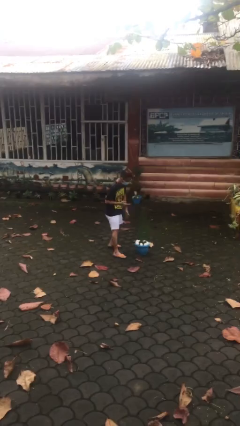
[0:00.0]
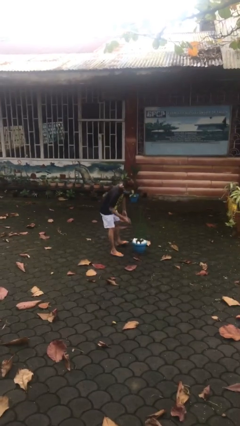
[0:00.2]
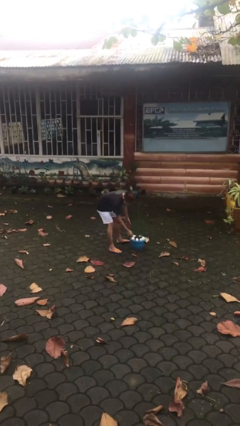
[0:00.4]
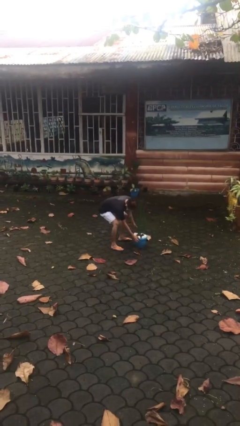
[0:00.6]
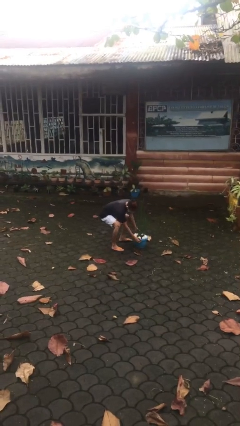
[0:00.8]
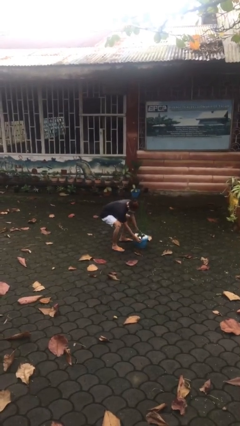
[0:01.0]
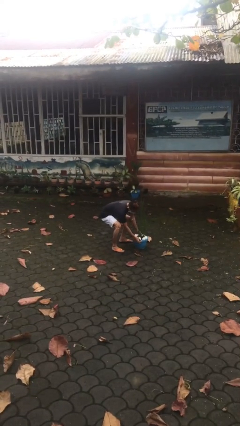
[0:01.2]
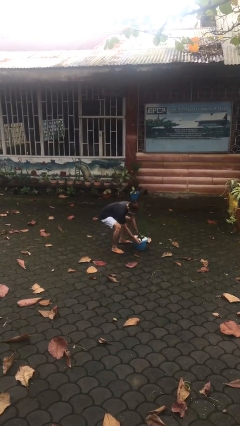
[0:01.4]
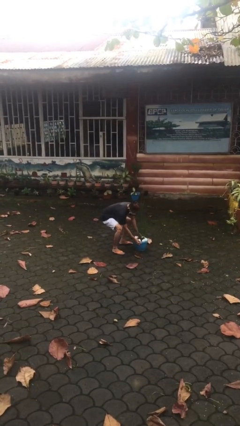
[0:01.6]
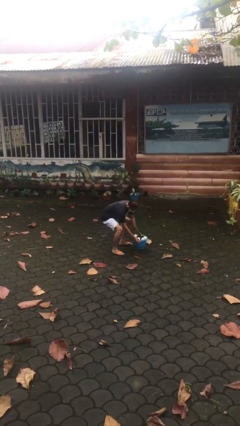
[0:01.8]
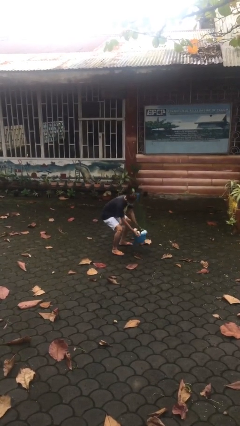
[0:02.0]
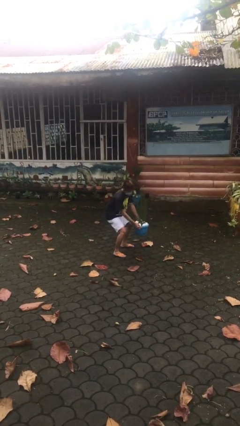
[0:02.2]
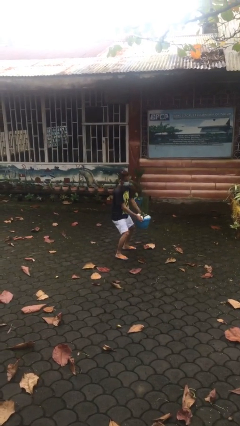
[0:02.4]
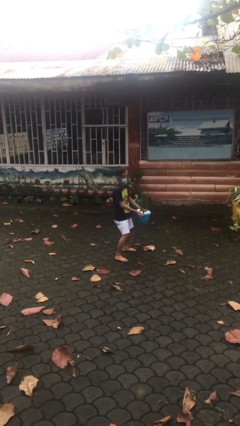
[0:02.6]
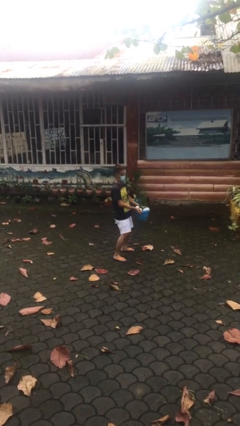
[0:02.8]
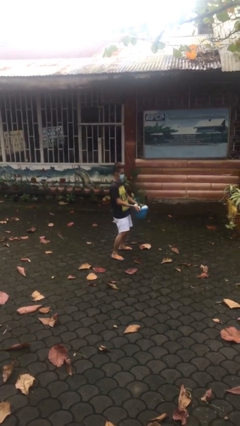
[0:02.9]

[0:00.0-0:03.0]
person picks up object from floor

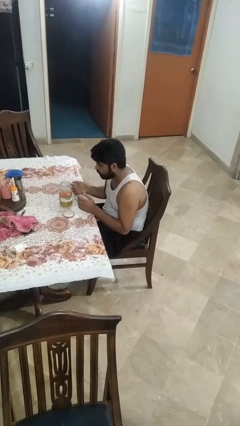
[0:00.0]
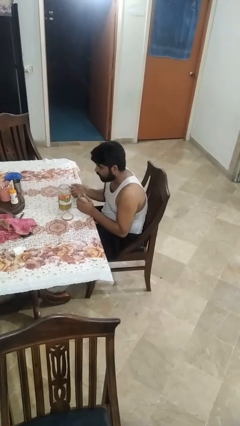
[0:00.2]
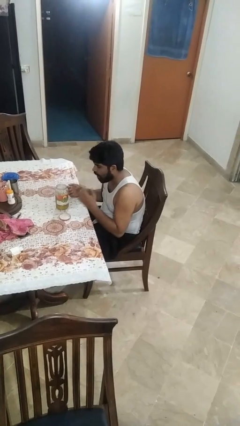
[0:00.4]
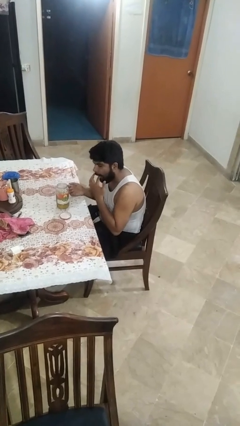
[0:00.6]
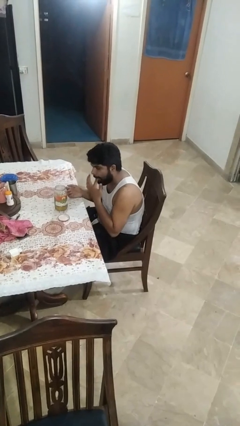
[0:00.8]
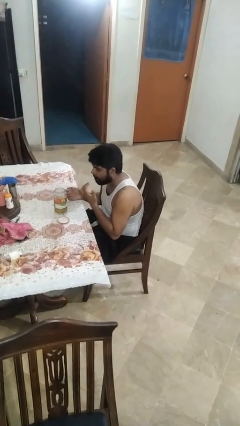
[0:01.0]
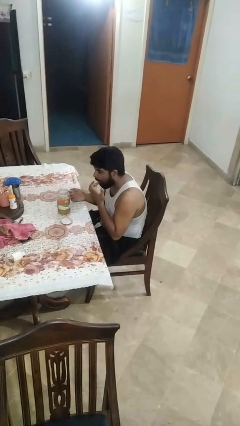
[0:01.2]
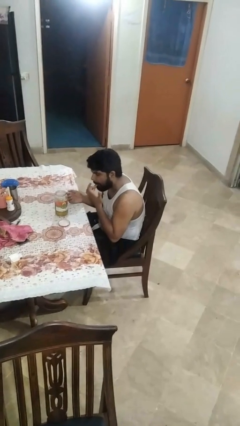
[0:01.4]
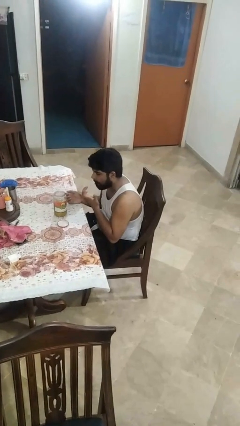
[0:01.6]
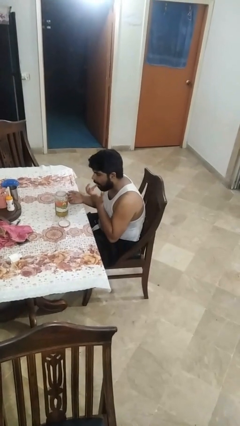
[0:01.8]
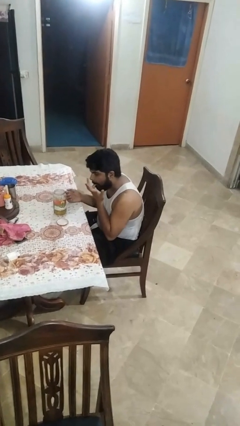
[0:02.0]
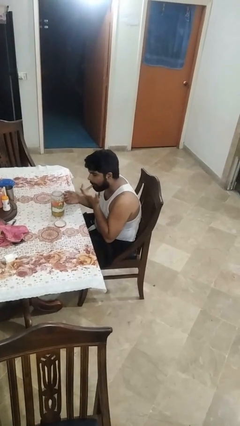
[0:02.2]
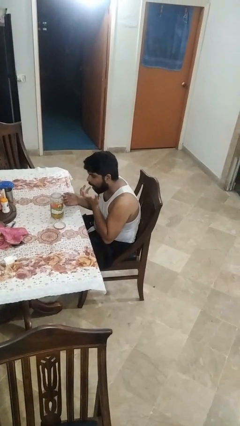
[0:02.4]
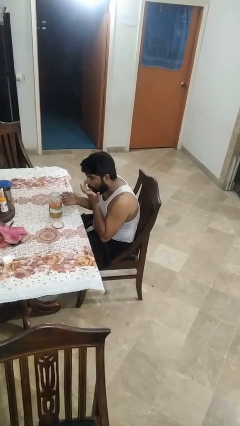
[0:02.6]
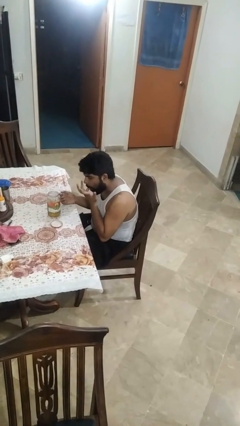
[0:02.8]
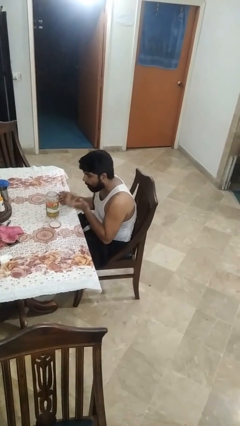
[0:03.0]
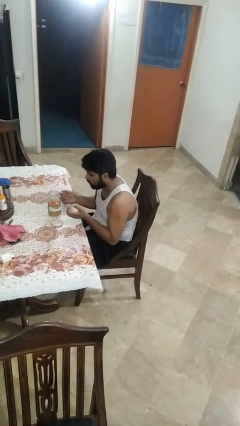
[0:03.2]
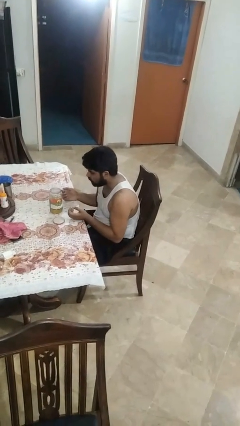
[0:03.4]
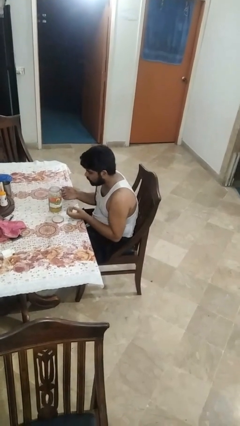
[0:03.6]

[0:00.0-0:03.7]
person licks fingers

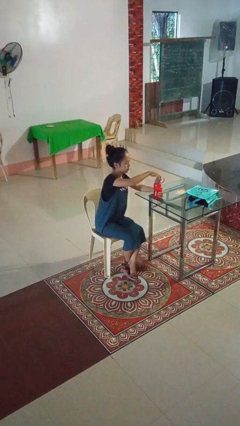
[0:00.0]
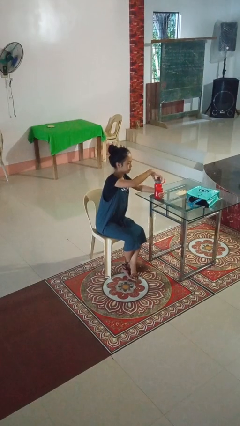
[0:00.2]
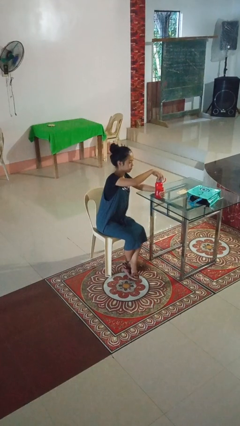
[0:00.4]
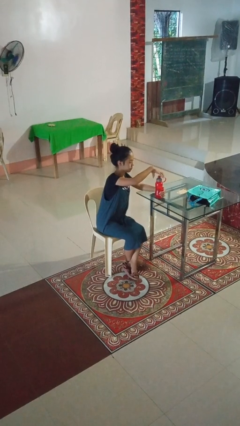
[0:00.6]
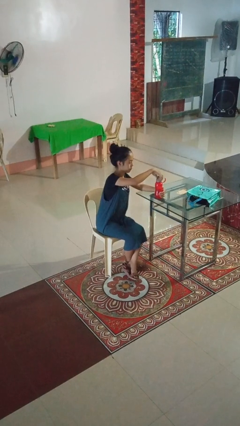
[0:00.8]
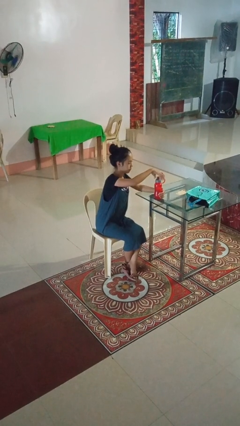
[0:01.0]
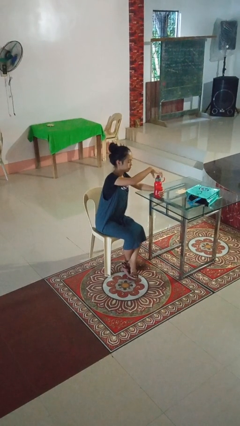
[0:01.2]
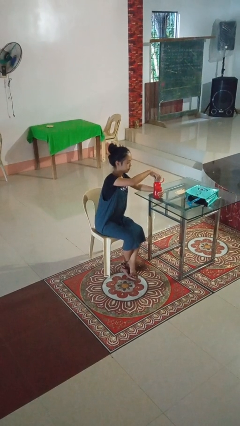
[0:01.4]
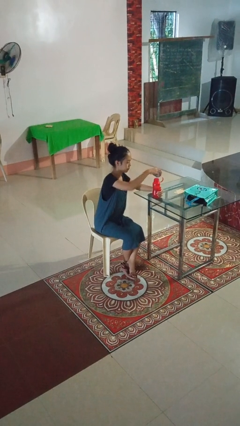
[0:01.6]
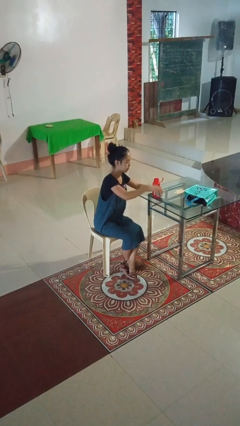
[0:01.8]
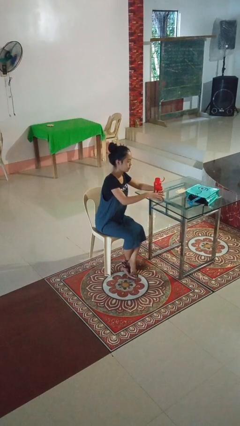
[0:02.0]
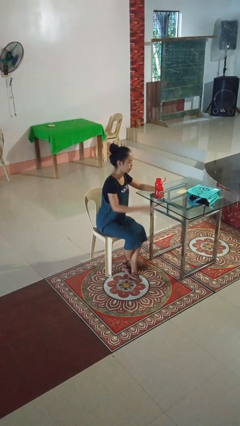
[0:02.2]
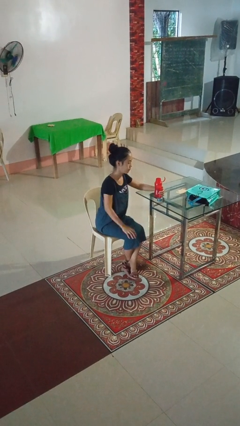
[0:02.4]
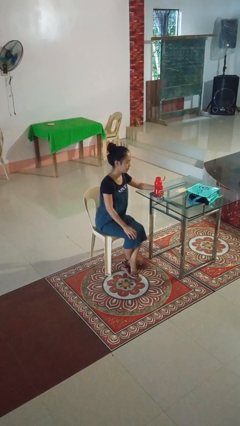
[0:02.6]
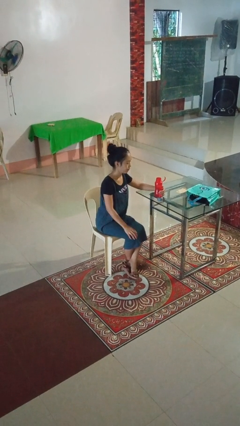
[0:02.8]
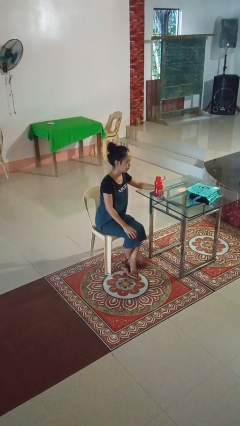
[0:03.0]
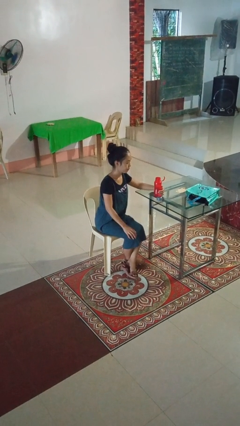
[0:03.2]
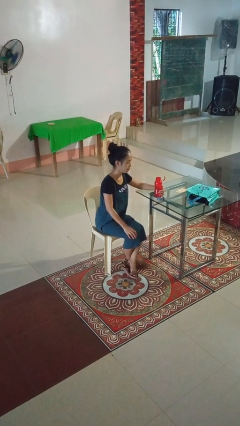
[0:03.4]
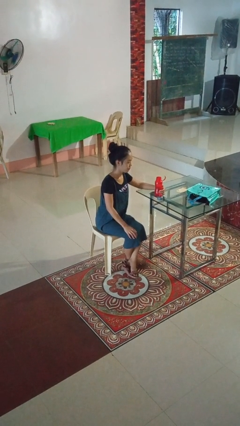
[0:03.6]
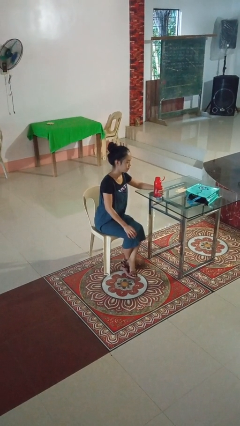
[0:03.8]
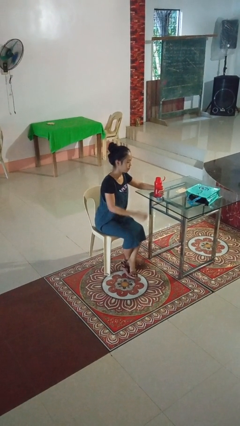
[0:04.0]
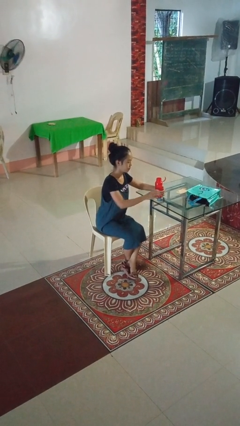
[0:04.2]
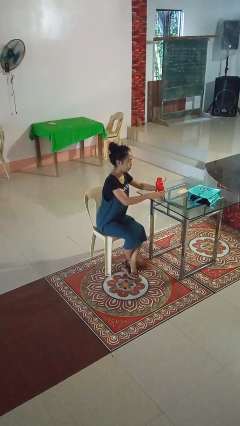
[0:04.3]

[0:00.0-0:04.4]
person unscrews lid from bottle

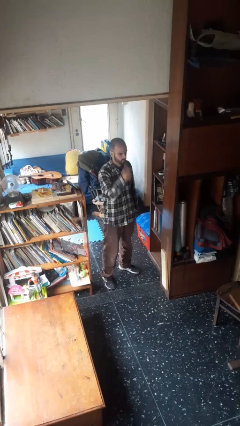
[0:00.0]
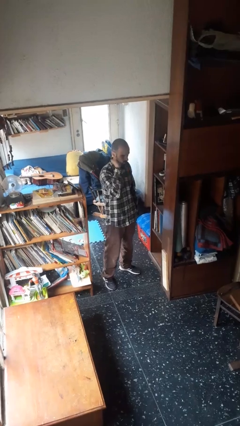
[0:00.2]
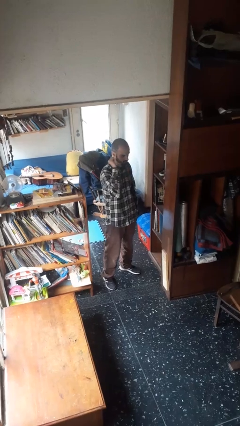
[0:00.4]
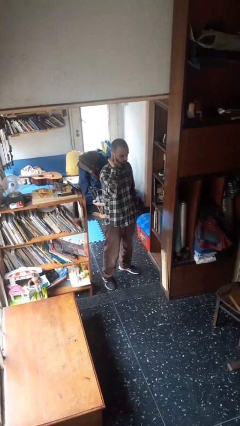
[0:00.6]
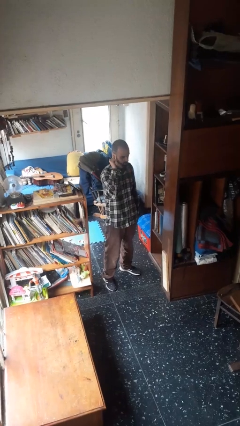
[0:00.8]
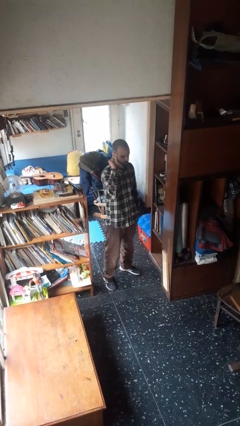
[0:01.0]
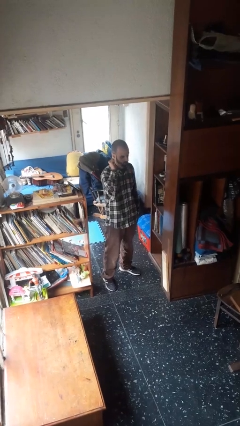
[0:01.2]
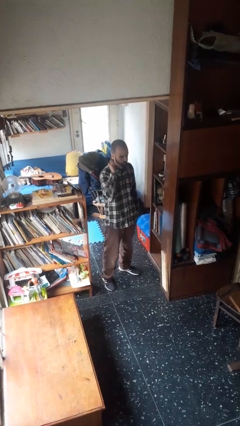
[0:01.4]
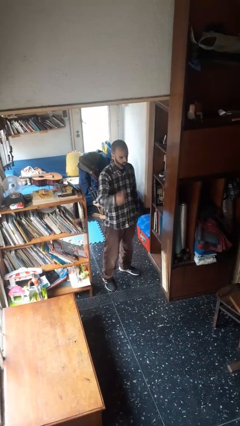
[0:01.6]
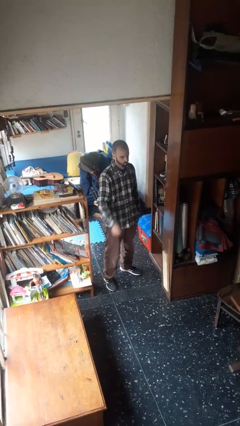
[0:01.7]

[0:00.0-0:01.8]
person gestures behind me

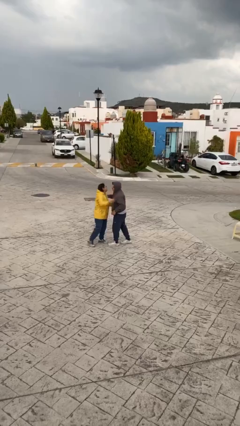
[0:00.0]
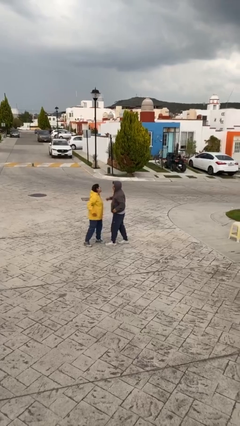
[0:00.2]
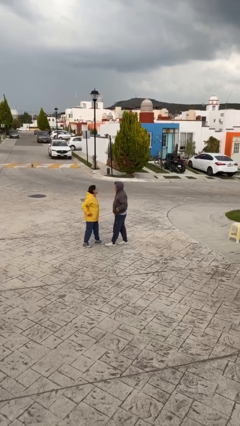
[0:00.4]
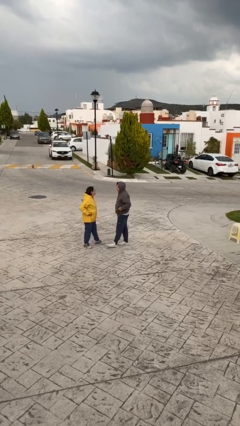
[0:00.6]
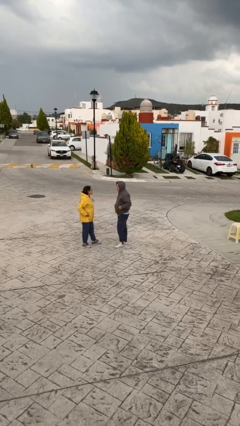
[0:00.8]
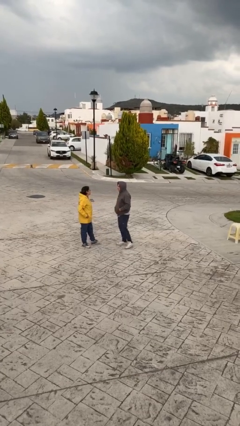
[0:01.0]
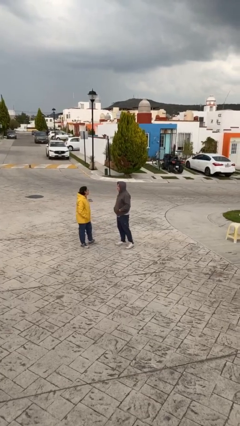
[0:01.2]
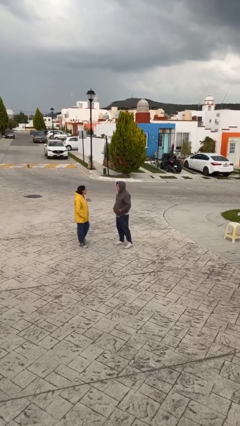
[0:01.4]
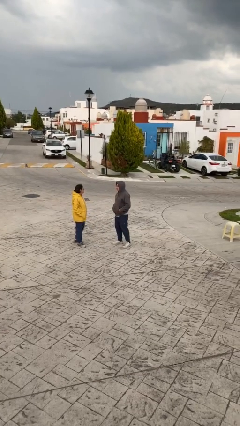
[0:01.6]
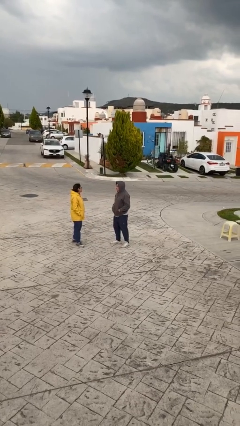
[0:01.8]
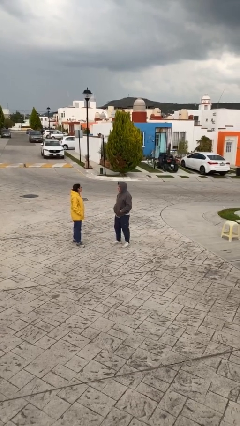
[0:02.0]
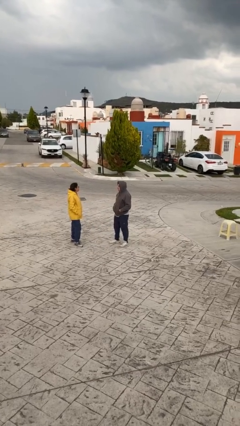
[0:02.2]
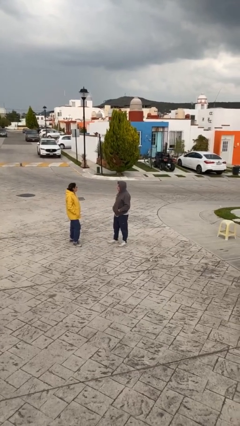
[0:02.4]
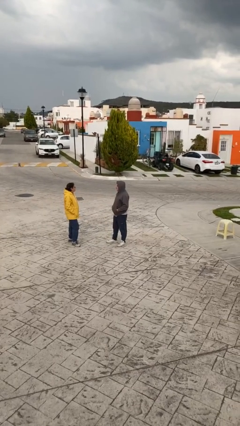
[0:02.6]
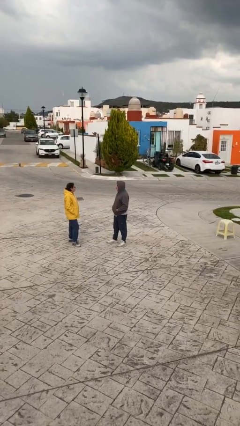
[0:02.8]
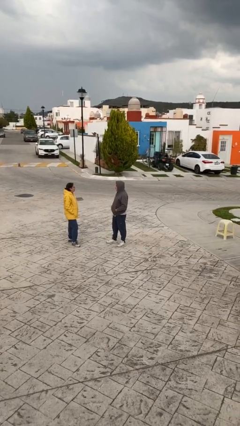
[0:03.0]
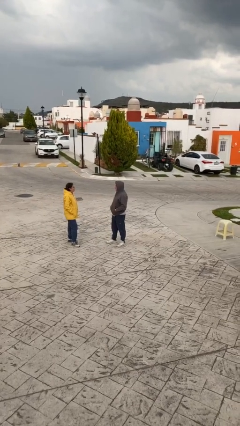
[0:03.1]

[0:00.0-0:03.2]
person talks to person

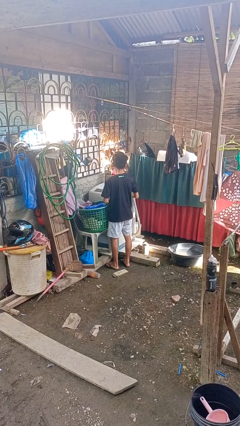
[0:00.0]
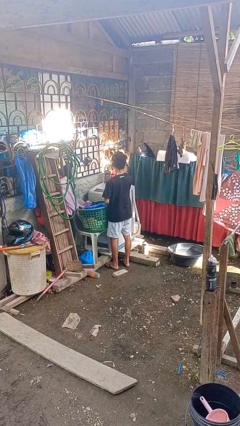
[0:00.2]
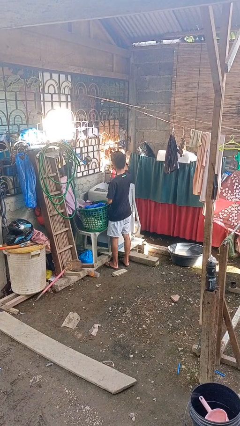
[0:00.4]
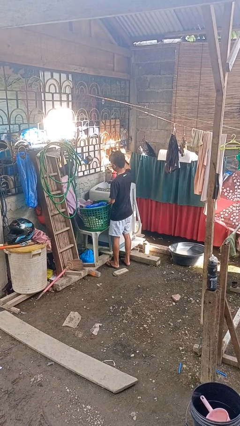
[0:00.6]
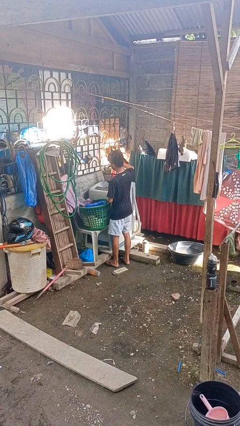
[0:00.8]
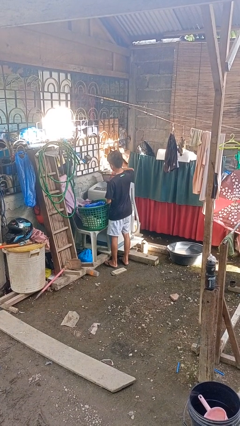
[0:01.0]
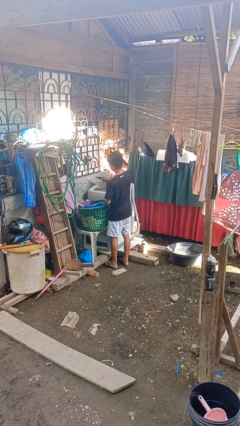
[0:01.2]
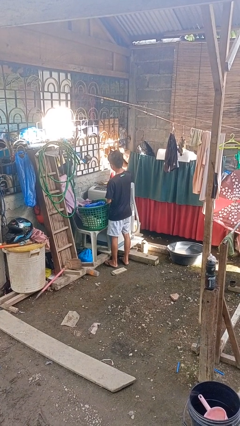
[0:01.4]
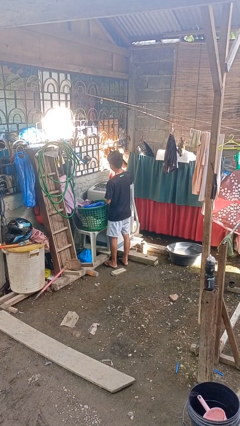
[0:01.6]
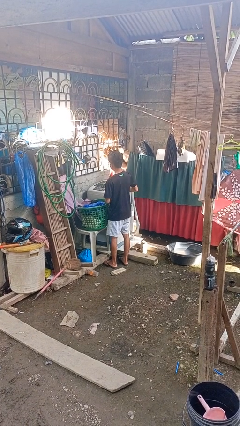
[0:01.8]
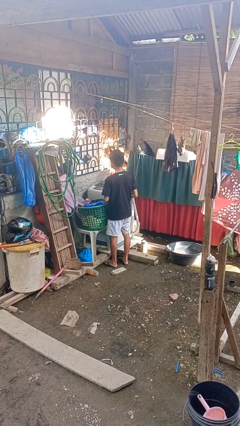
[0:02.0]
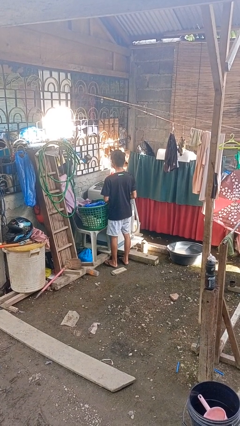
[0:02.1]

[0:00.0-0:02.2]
person closes clothes washer
